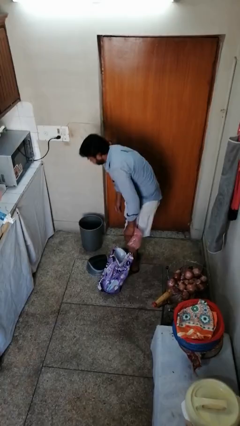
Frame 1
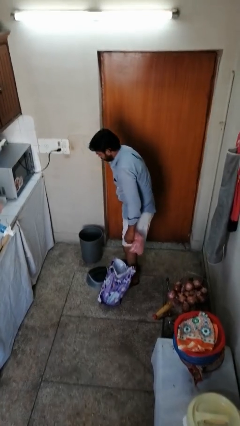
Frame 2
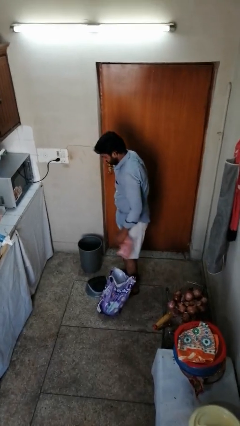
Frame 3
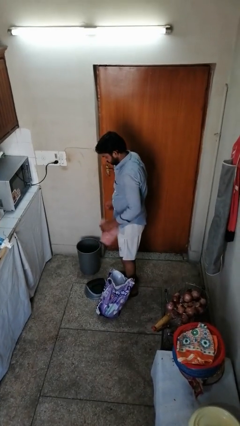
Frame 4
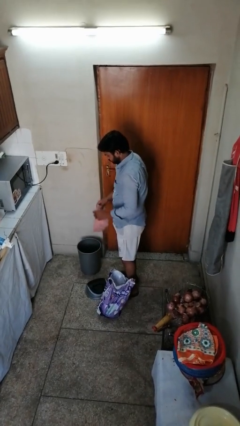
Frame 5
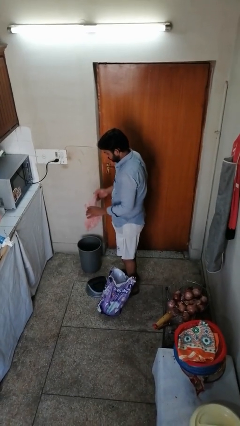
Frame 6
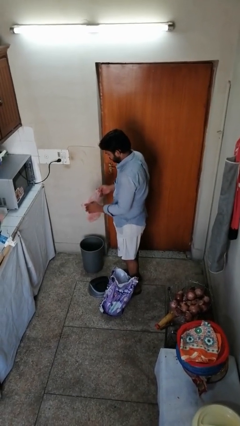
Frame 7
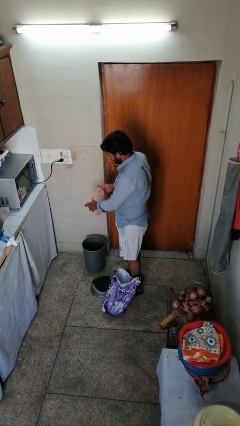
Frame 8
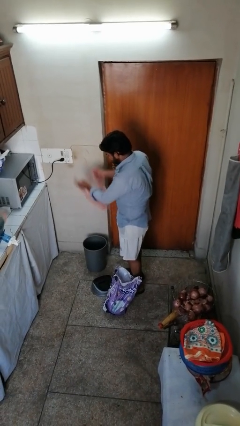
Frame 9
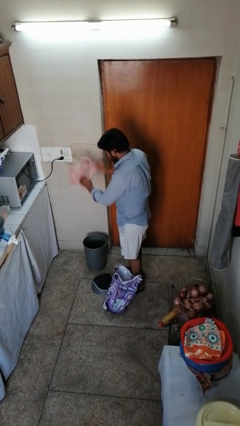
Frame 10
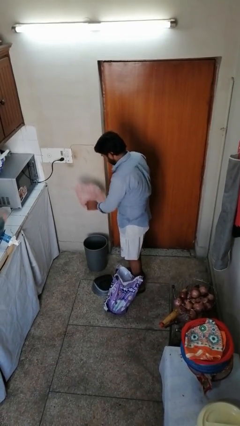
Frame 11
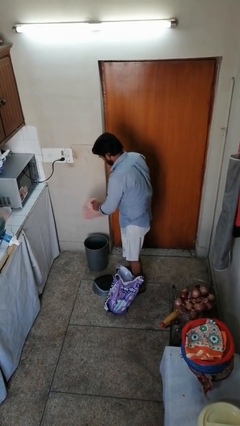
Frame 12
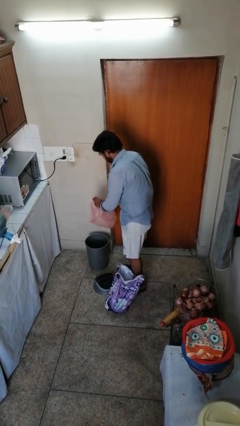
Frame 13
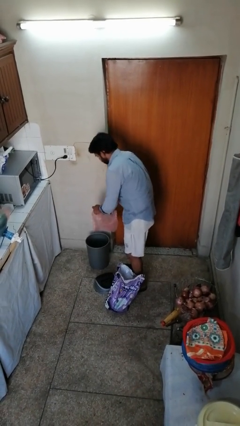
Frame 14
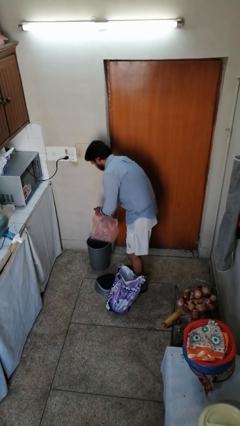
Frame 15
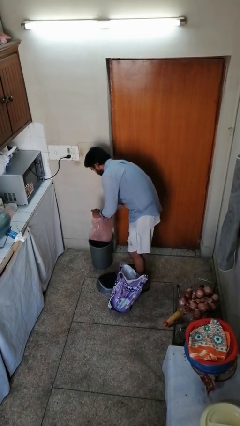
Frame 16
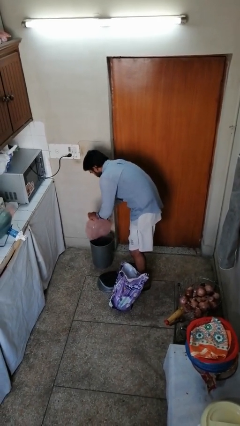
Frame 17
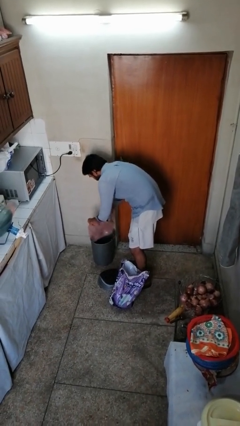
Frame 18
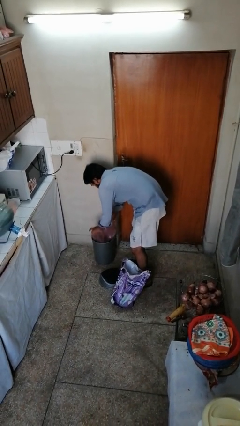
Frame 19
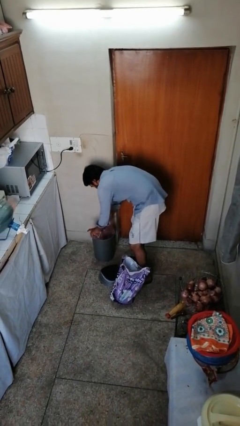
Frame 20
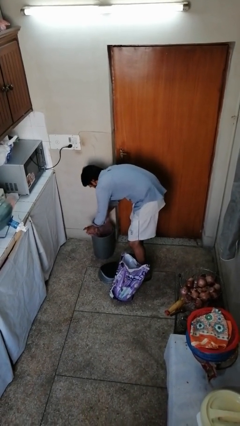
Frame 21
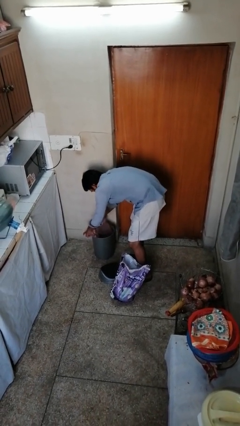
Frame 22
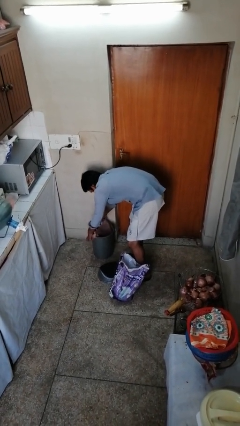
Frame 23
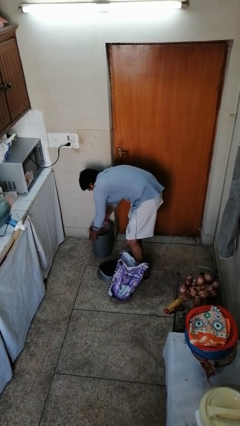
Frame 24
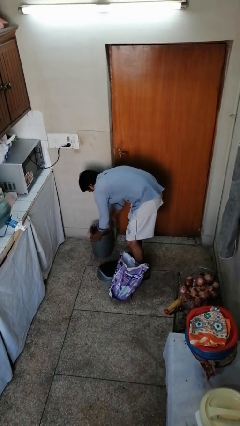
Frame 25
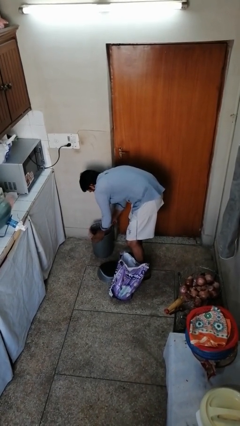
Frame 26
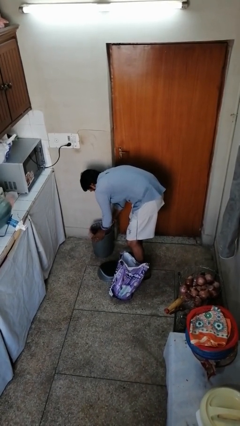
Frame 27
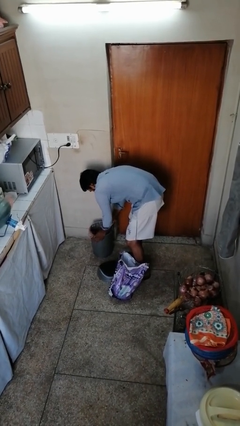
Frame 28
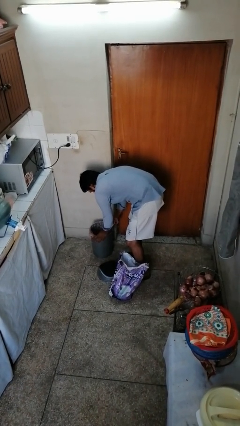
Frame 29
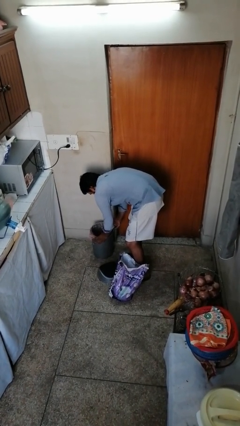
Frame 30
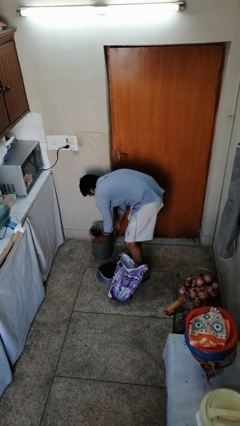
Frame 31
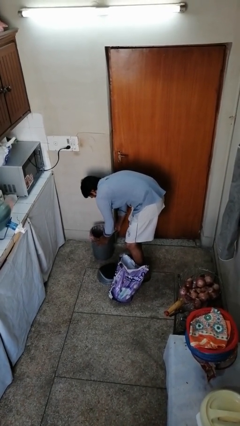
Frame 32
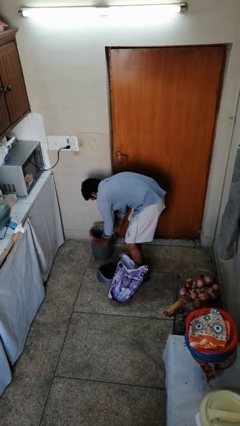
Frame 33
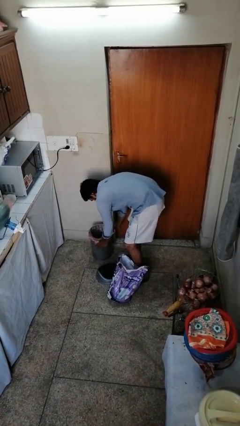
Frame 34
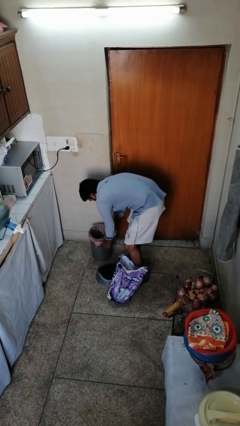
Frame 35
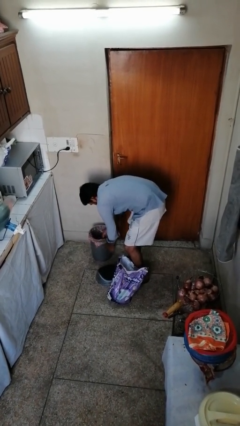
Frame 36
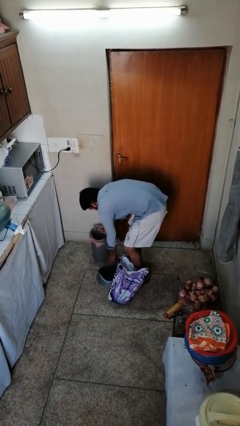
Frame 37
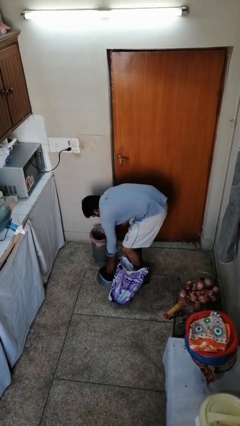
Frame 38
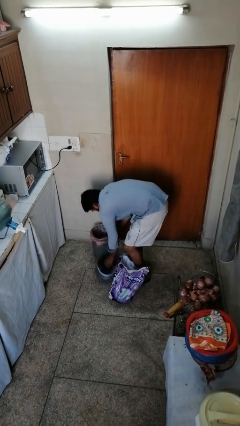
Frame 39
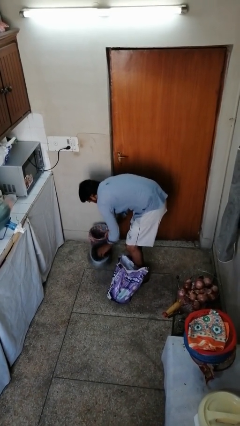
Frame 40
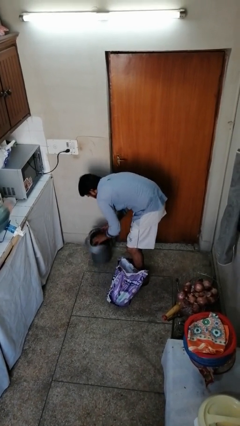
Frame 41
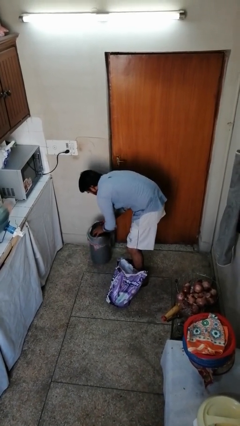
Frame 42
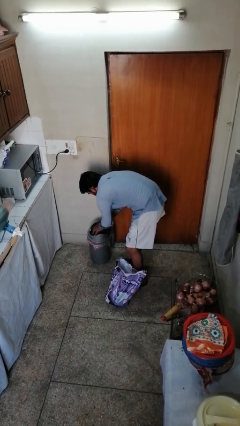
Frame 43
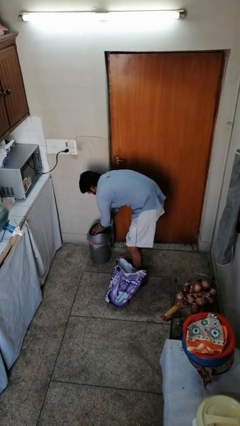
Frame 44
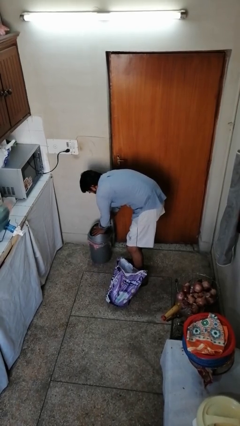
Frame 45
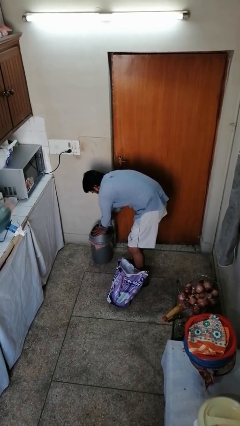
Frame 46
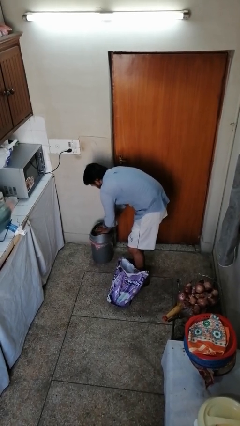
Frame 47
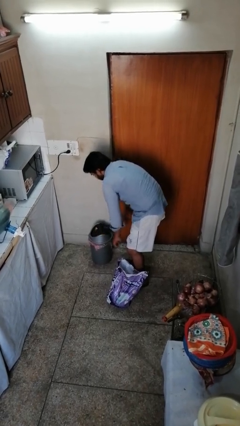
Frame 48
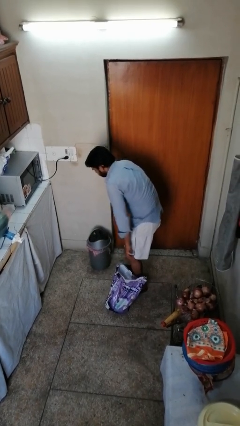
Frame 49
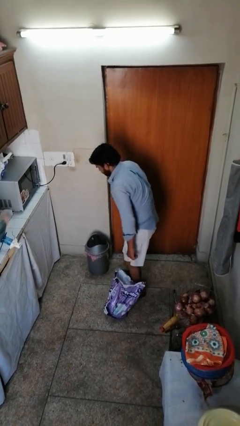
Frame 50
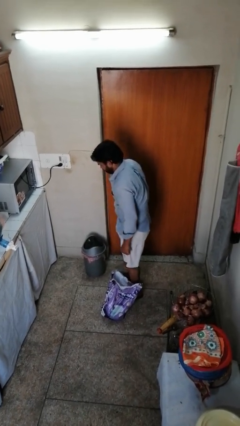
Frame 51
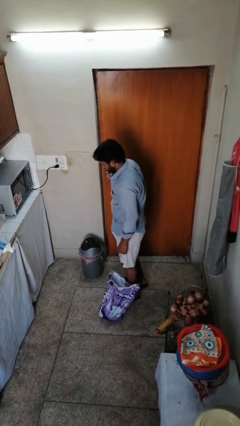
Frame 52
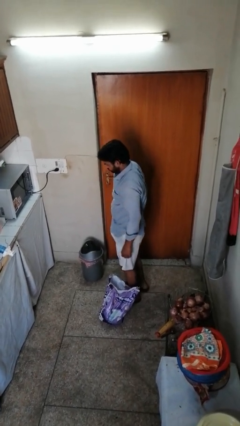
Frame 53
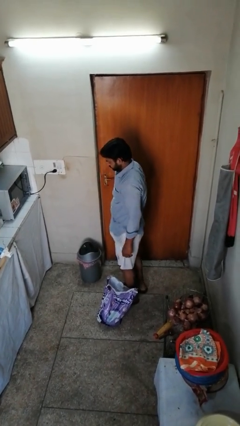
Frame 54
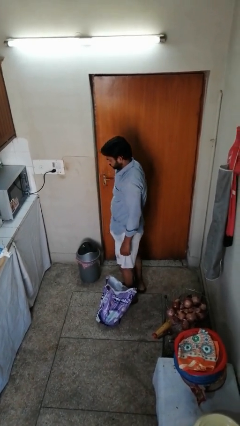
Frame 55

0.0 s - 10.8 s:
person inserts trashbag into trashcan

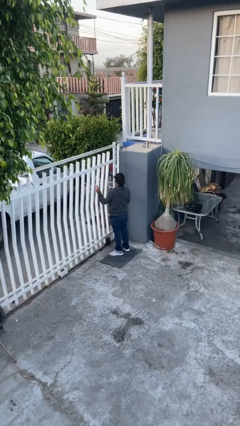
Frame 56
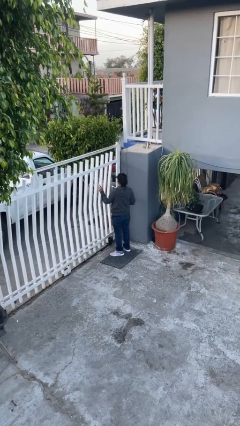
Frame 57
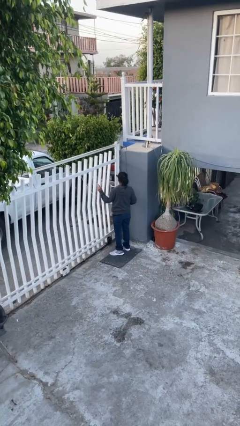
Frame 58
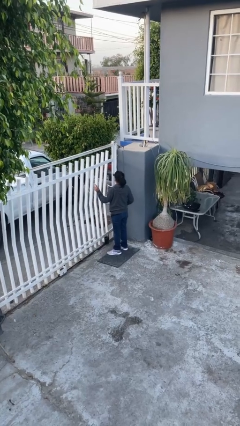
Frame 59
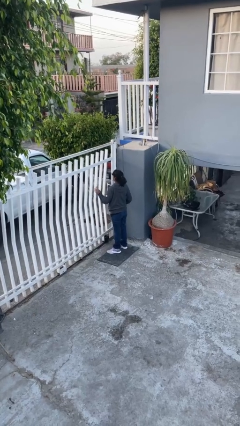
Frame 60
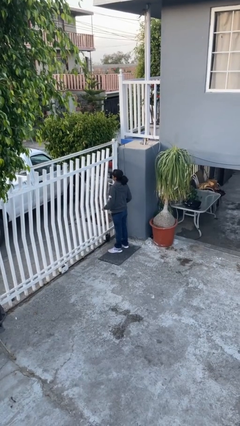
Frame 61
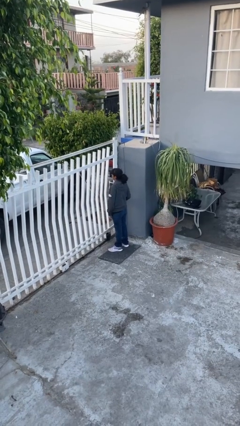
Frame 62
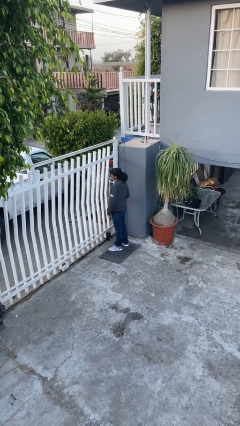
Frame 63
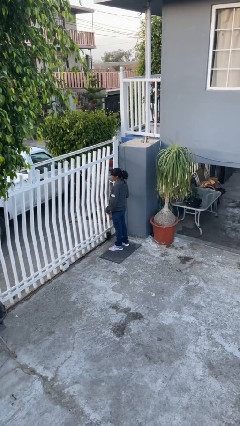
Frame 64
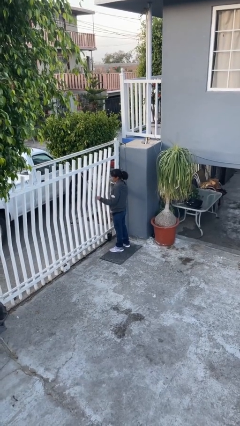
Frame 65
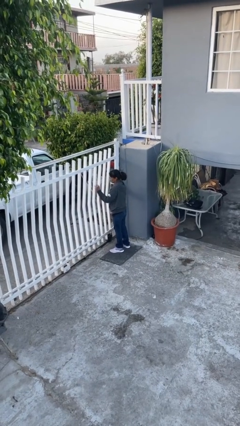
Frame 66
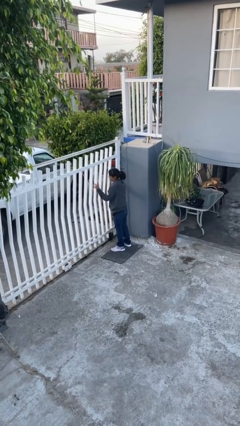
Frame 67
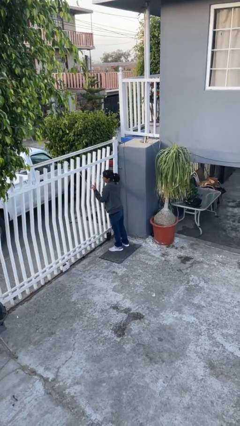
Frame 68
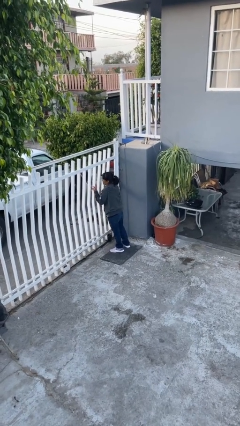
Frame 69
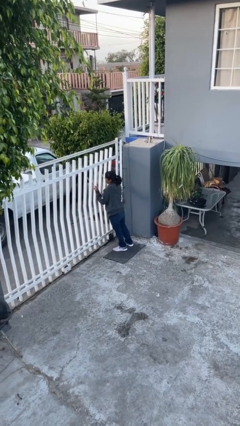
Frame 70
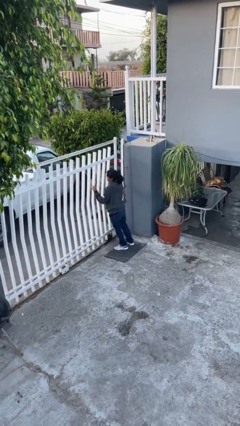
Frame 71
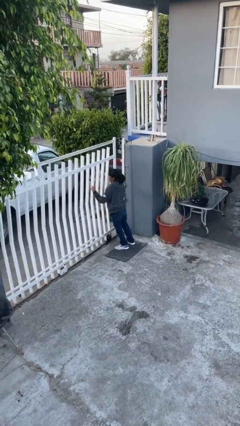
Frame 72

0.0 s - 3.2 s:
person closes facility door

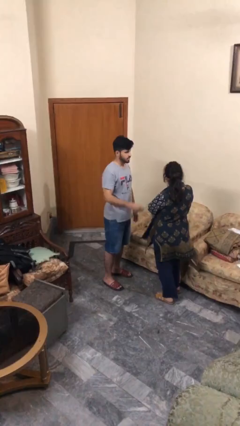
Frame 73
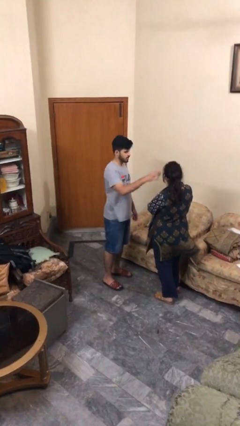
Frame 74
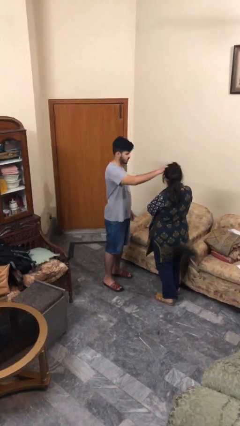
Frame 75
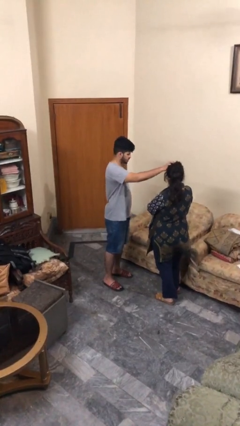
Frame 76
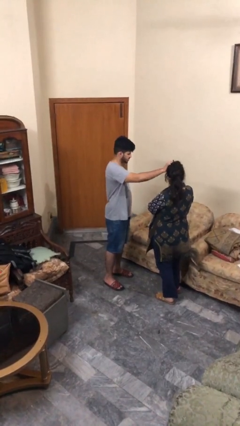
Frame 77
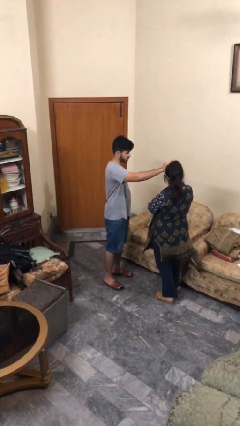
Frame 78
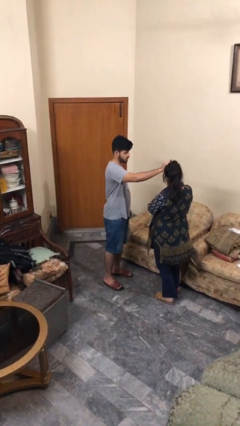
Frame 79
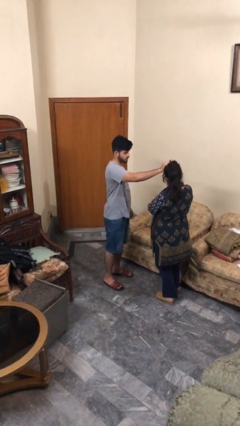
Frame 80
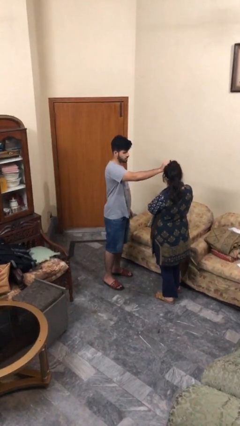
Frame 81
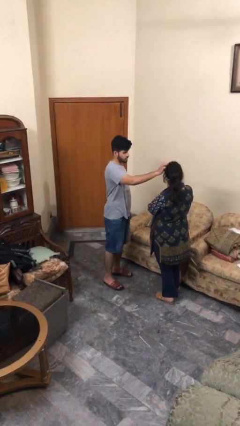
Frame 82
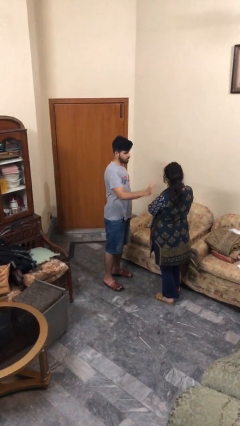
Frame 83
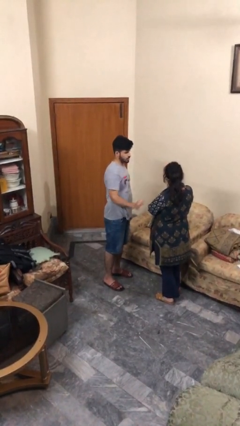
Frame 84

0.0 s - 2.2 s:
person grabs person by hair

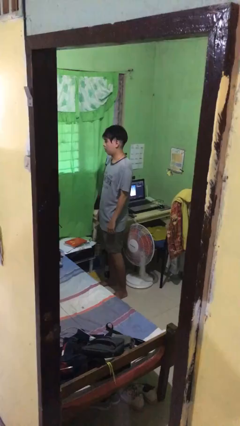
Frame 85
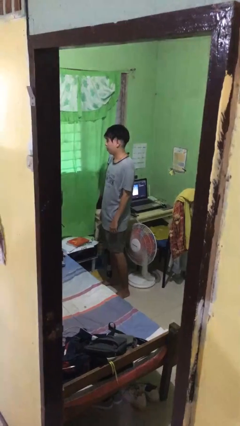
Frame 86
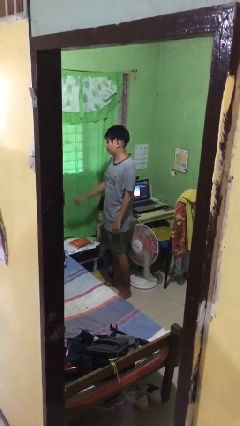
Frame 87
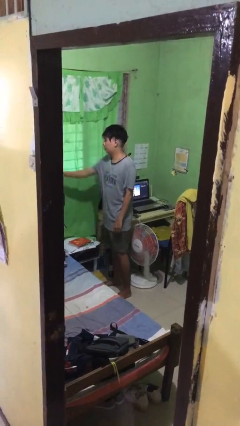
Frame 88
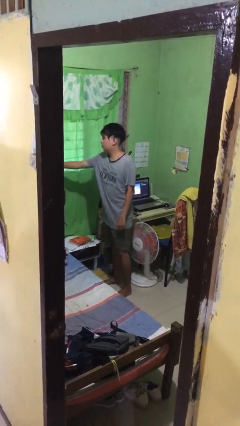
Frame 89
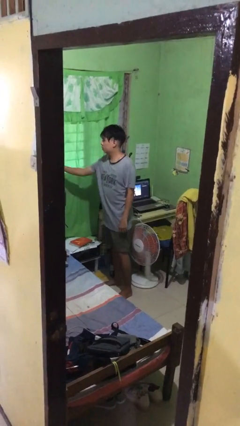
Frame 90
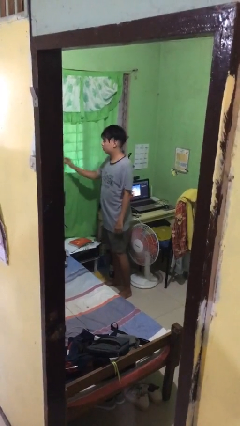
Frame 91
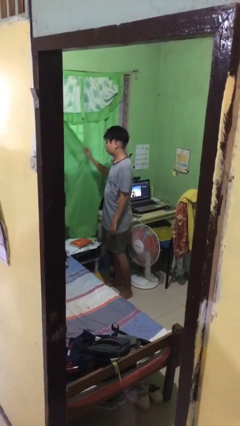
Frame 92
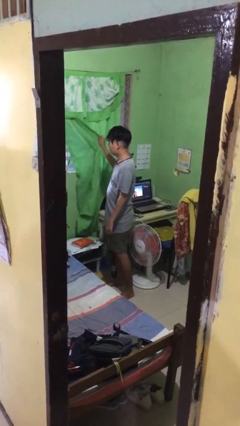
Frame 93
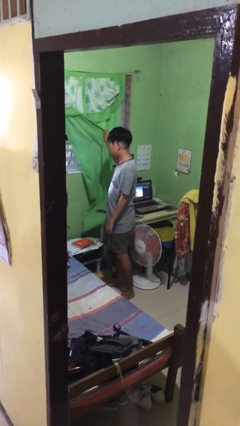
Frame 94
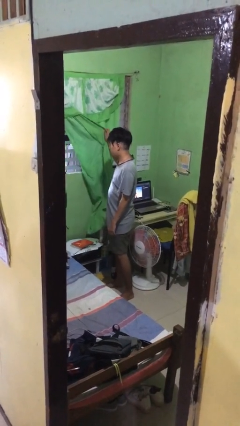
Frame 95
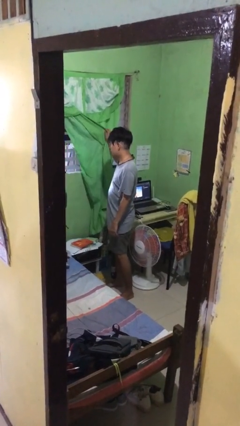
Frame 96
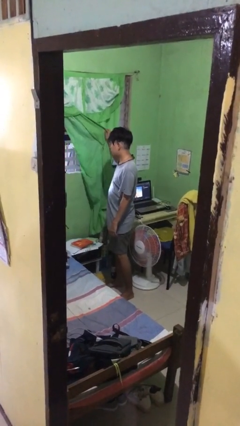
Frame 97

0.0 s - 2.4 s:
person opens curtains
